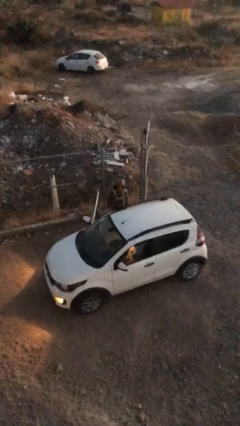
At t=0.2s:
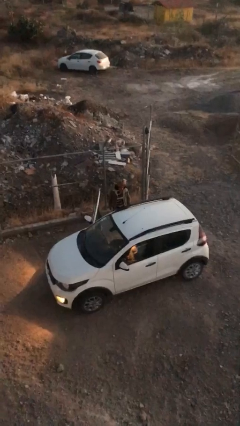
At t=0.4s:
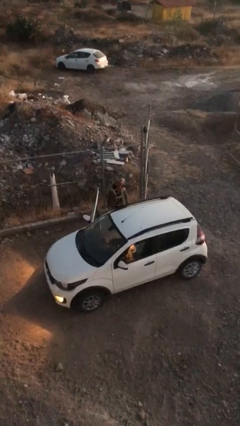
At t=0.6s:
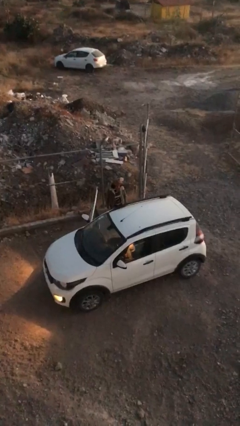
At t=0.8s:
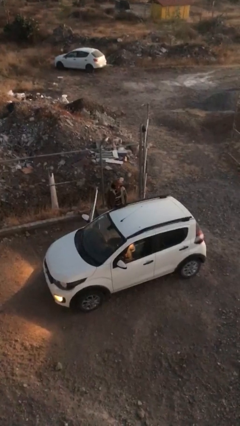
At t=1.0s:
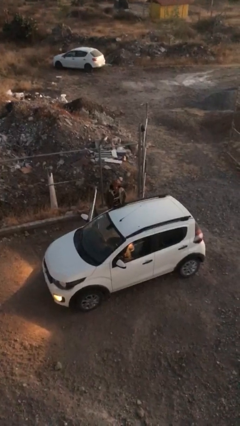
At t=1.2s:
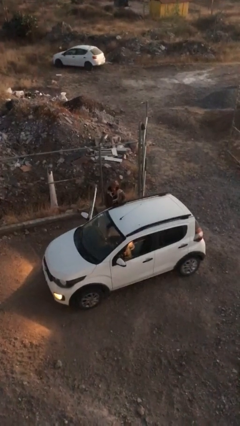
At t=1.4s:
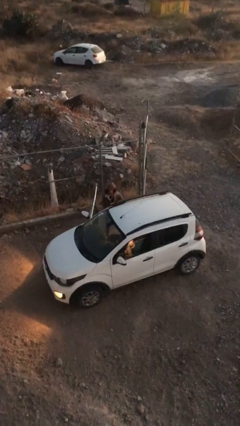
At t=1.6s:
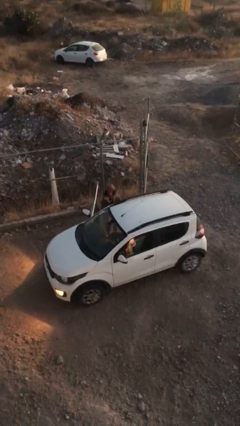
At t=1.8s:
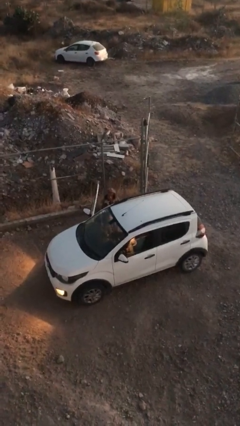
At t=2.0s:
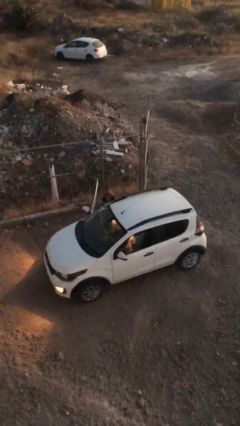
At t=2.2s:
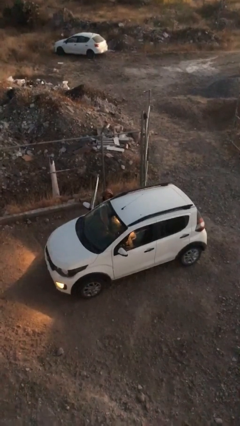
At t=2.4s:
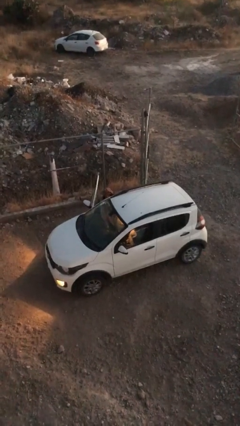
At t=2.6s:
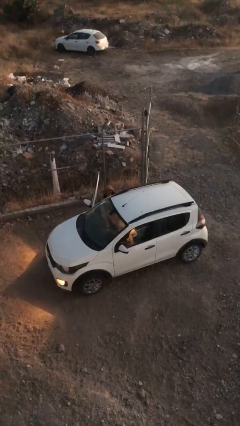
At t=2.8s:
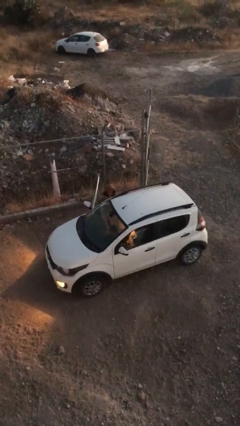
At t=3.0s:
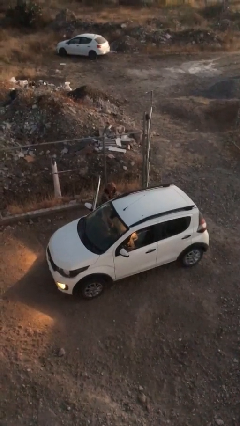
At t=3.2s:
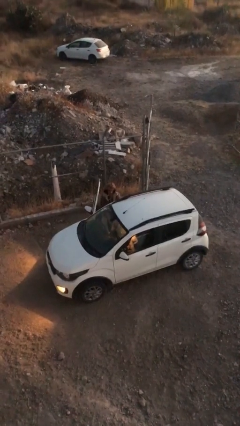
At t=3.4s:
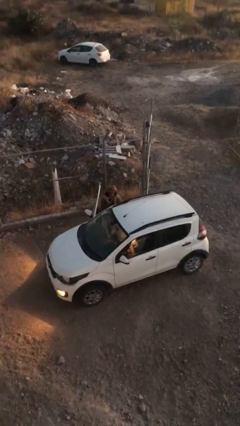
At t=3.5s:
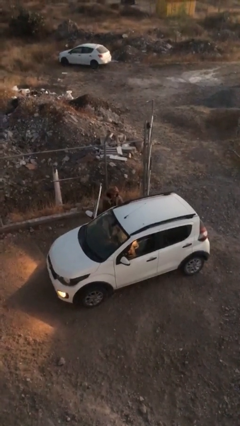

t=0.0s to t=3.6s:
person loads car

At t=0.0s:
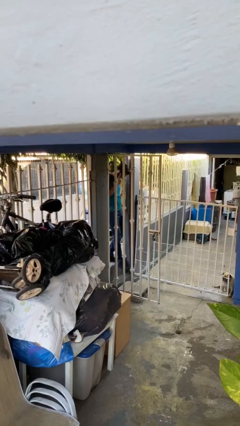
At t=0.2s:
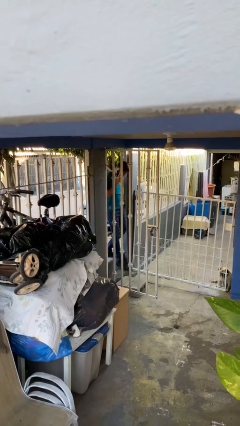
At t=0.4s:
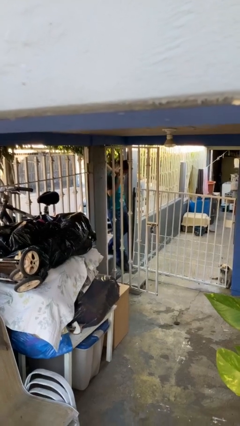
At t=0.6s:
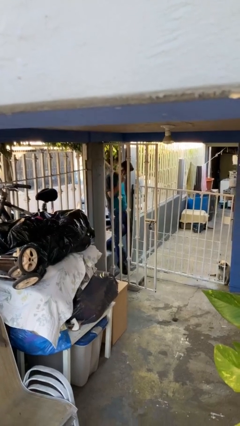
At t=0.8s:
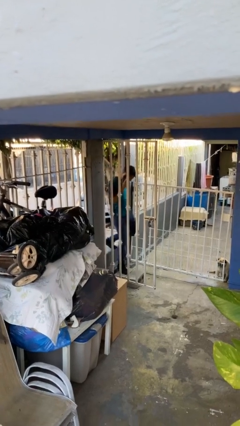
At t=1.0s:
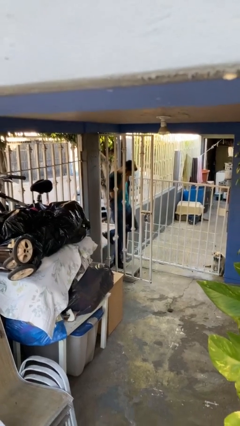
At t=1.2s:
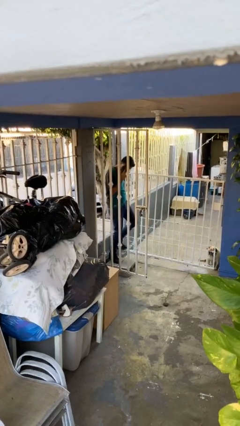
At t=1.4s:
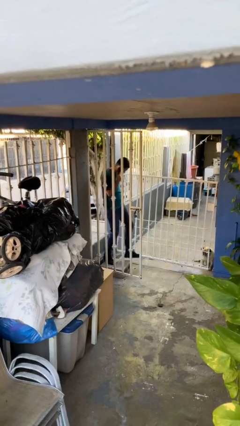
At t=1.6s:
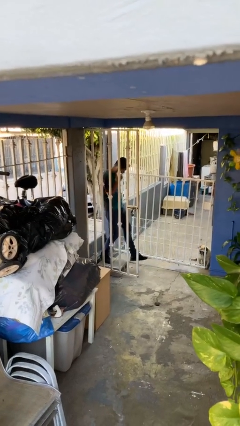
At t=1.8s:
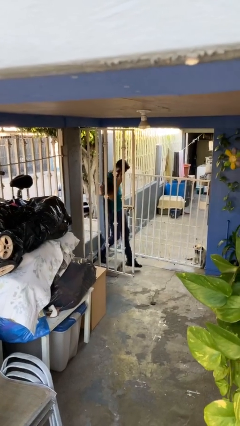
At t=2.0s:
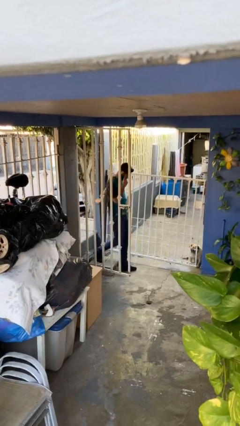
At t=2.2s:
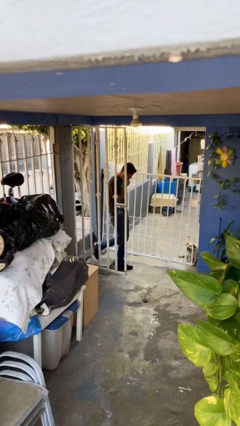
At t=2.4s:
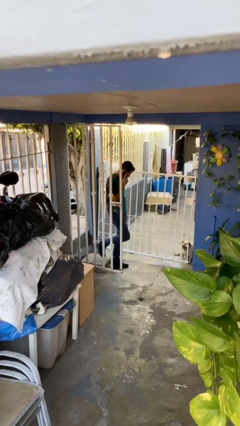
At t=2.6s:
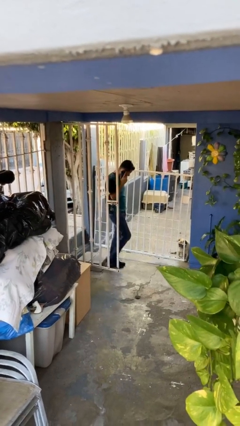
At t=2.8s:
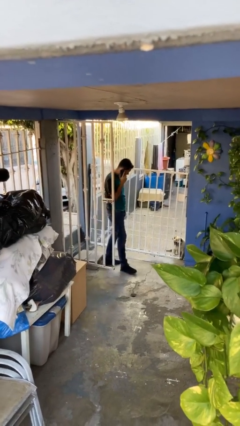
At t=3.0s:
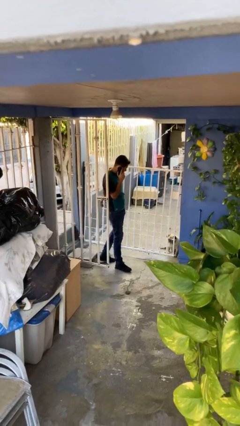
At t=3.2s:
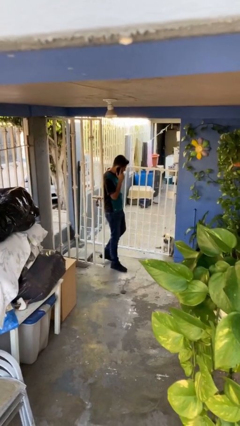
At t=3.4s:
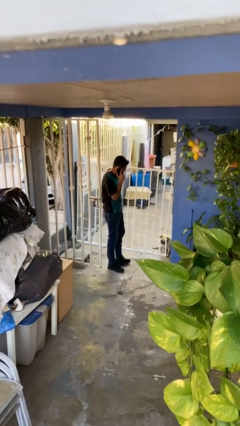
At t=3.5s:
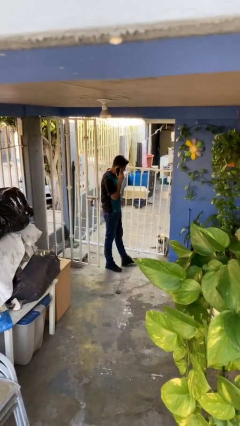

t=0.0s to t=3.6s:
person enters scene through structure

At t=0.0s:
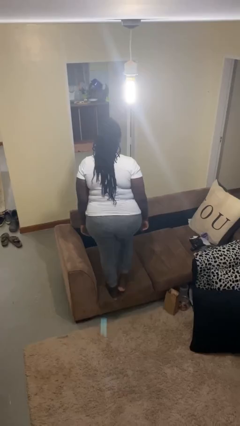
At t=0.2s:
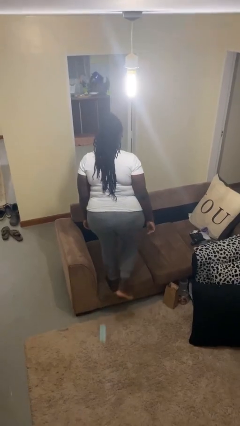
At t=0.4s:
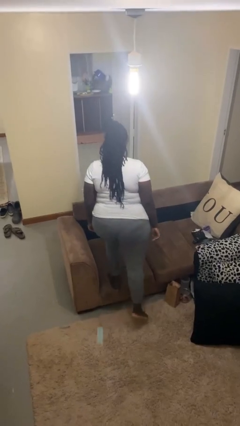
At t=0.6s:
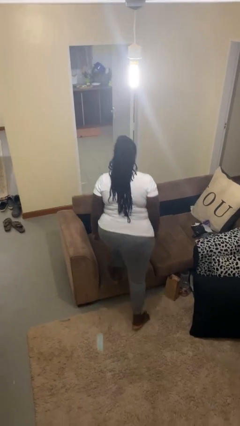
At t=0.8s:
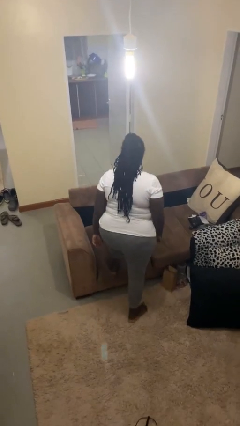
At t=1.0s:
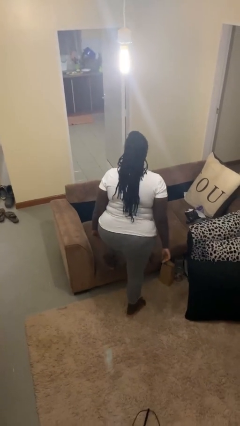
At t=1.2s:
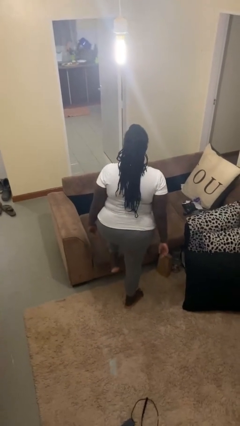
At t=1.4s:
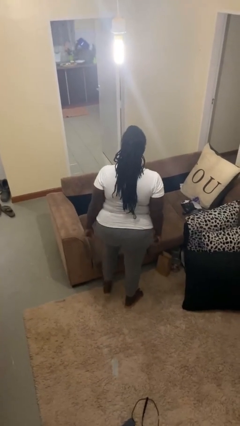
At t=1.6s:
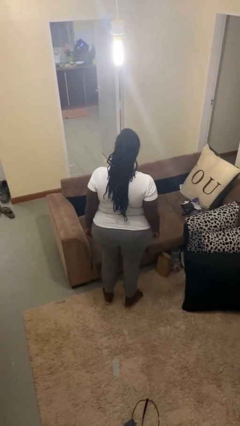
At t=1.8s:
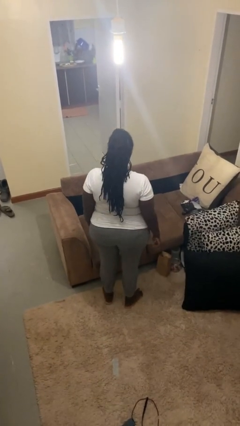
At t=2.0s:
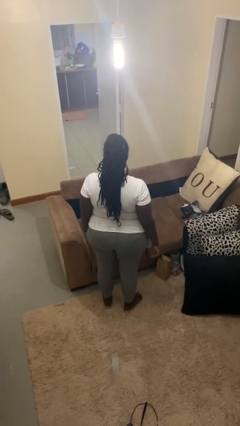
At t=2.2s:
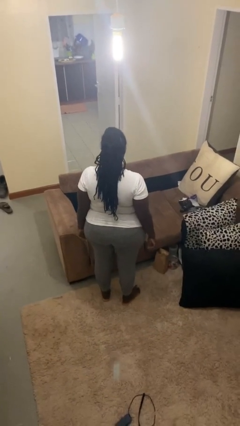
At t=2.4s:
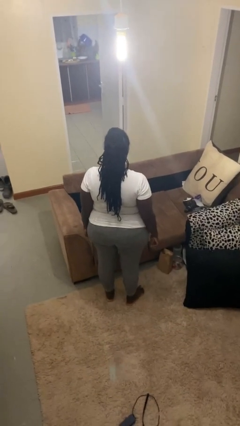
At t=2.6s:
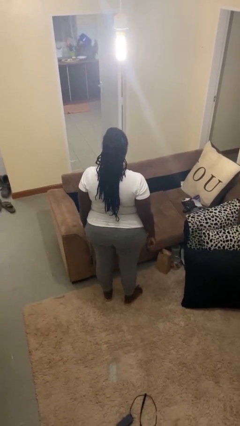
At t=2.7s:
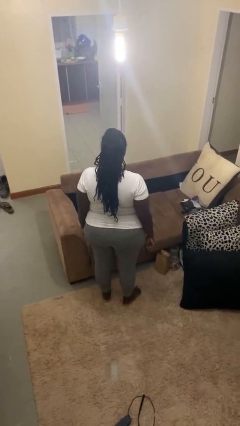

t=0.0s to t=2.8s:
person climbs off couch

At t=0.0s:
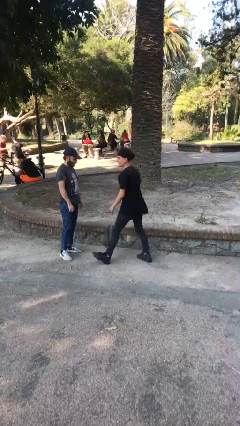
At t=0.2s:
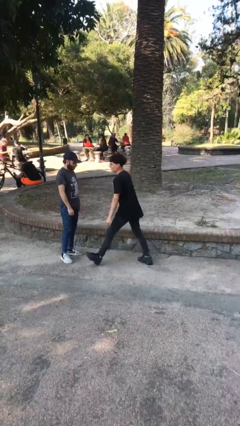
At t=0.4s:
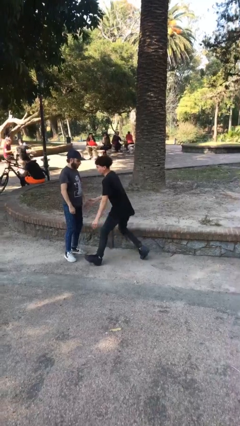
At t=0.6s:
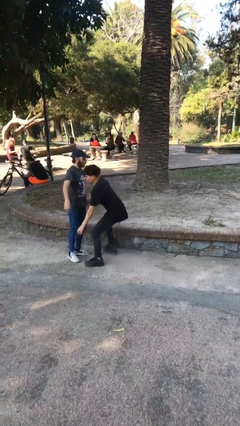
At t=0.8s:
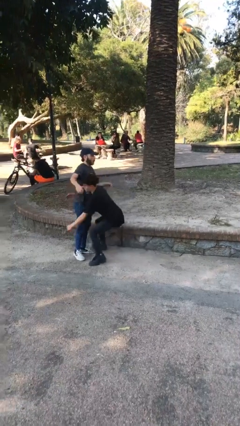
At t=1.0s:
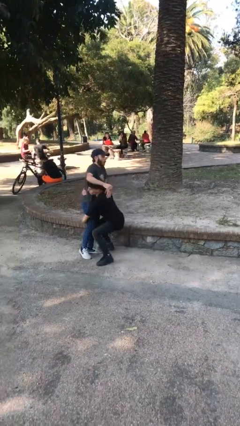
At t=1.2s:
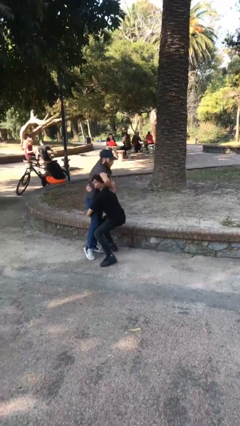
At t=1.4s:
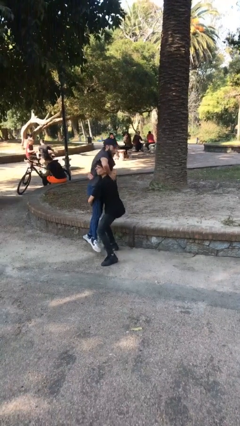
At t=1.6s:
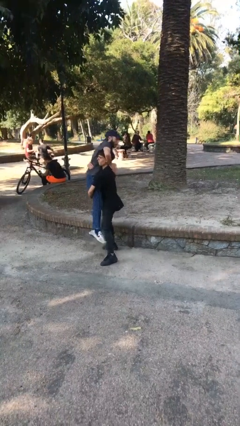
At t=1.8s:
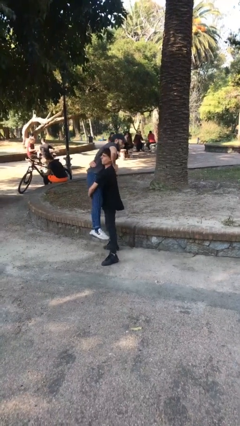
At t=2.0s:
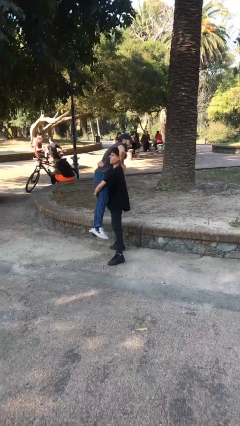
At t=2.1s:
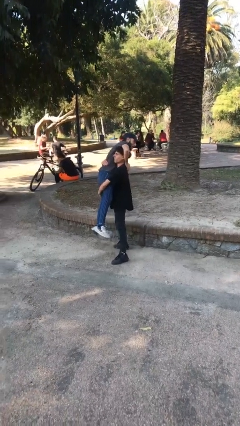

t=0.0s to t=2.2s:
person picks up person

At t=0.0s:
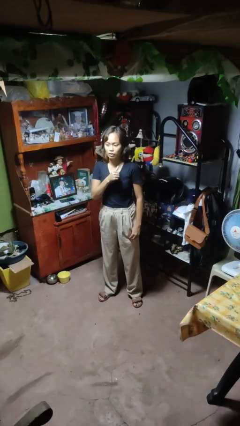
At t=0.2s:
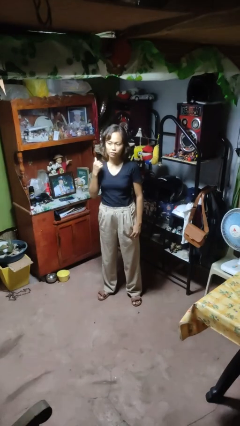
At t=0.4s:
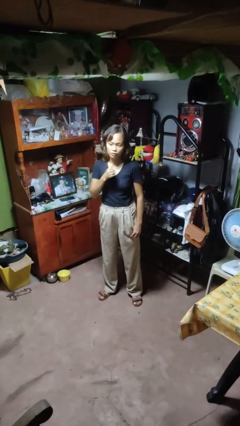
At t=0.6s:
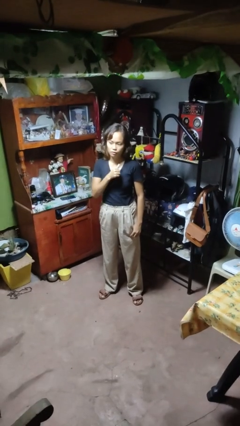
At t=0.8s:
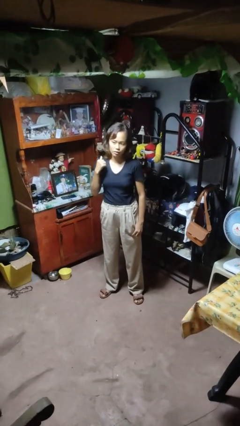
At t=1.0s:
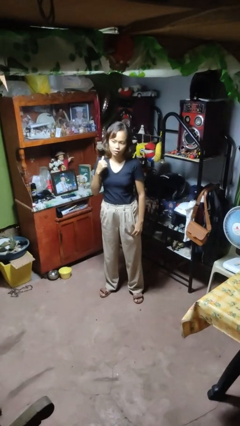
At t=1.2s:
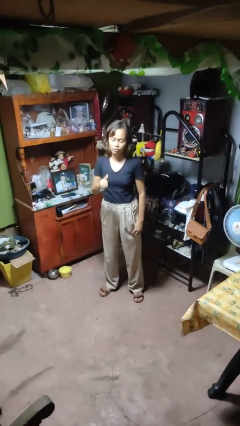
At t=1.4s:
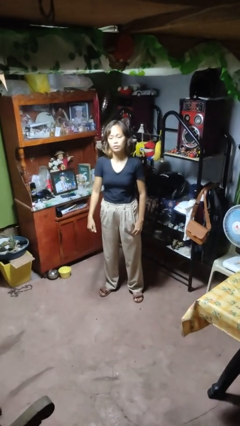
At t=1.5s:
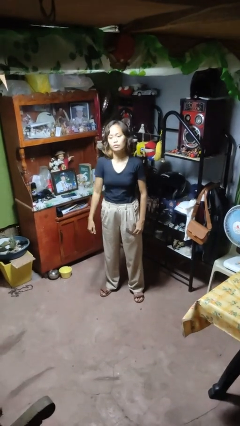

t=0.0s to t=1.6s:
person gestures cut

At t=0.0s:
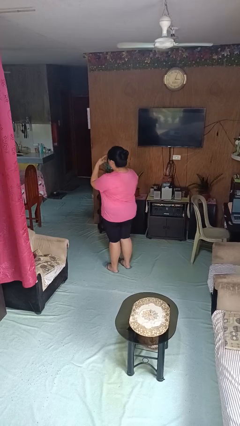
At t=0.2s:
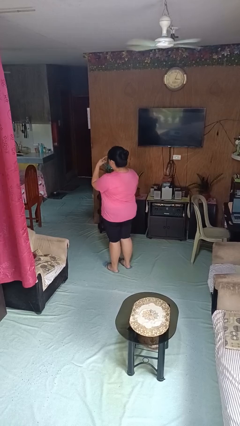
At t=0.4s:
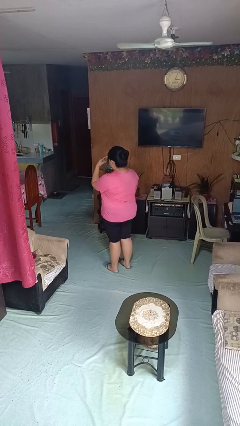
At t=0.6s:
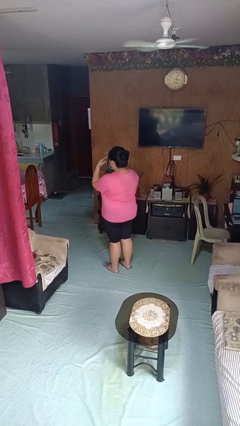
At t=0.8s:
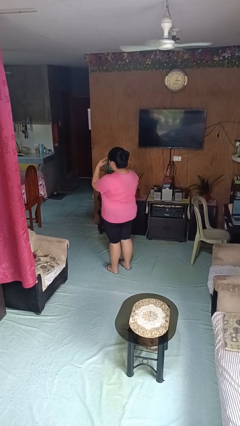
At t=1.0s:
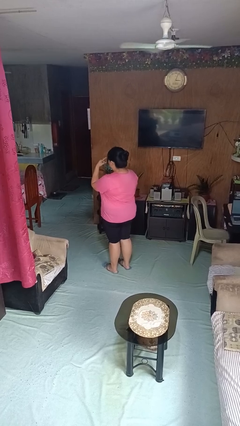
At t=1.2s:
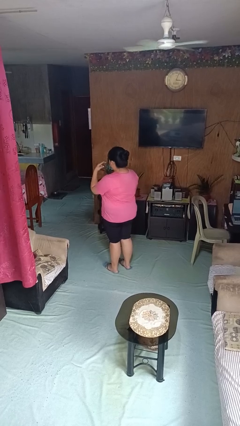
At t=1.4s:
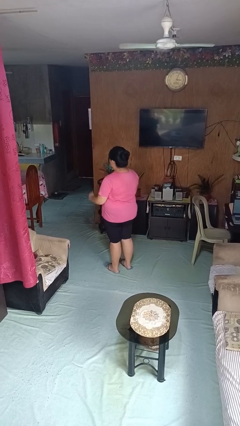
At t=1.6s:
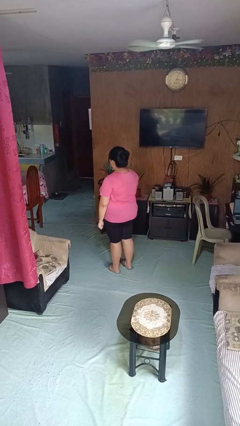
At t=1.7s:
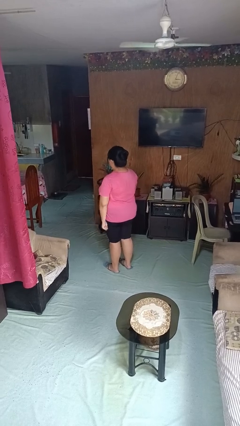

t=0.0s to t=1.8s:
person gestures watch closely

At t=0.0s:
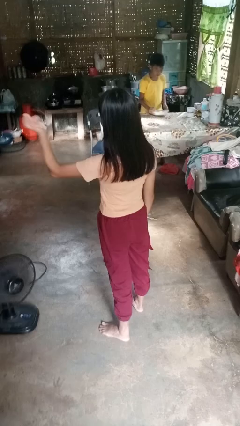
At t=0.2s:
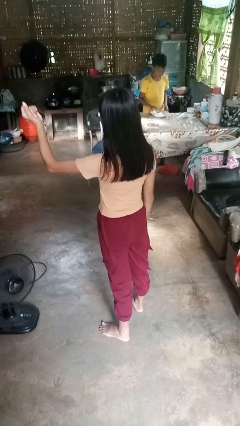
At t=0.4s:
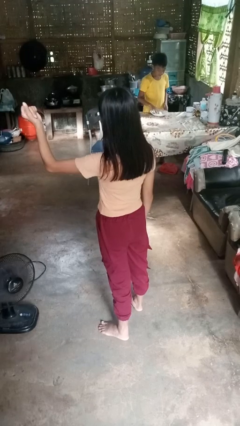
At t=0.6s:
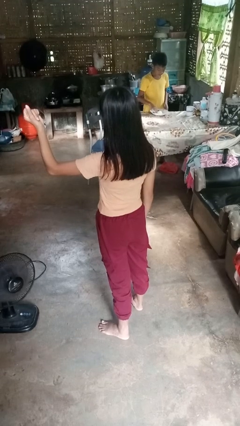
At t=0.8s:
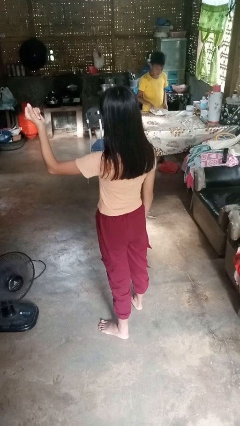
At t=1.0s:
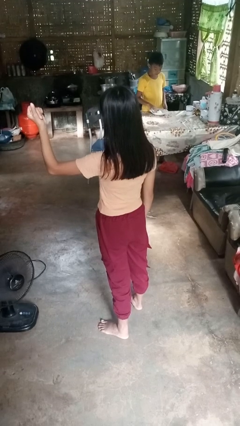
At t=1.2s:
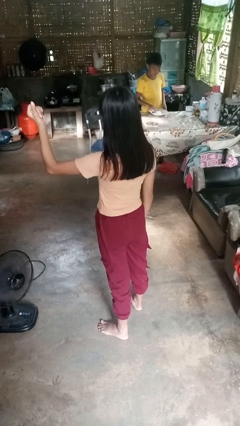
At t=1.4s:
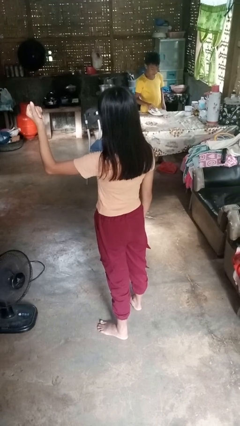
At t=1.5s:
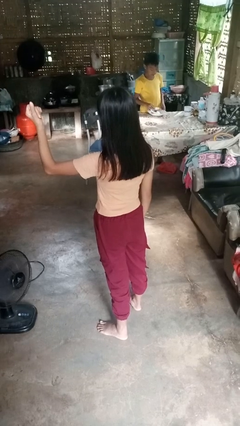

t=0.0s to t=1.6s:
person snaps fingers
